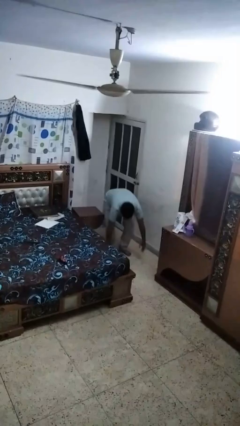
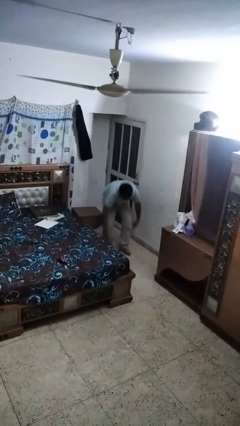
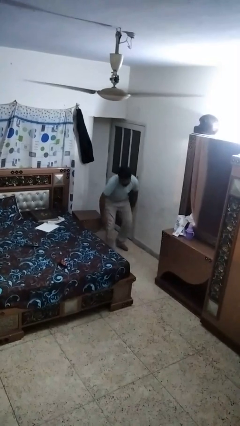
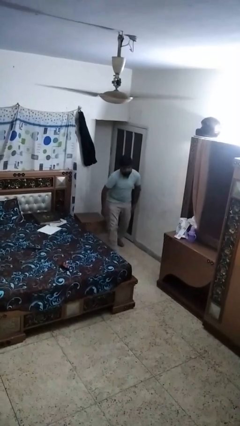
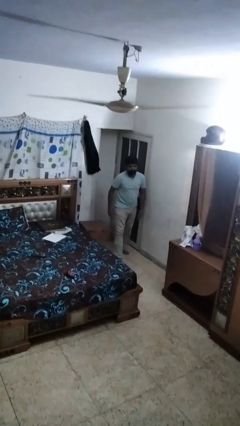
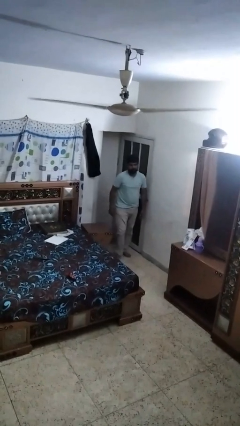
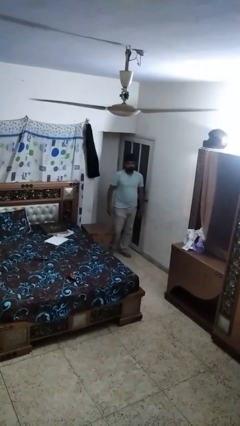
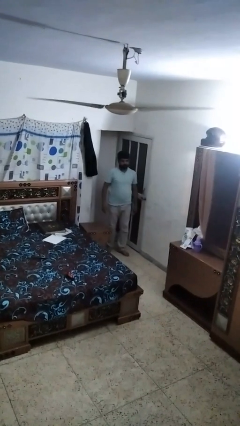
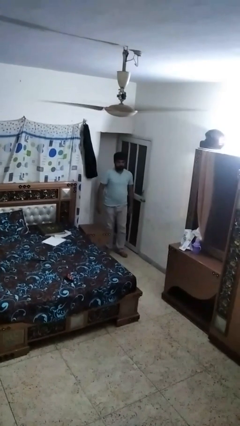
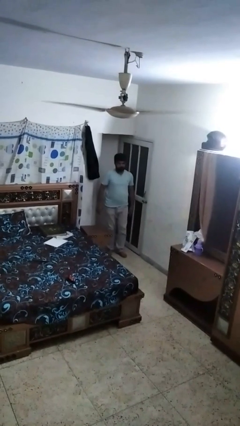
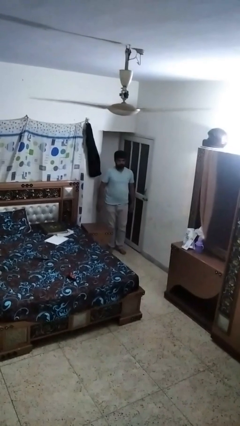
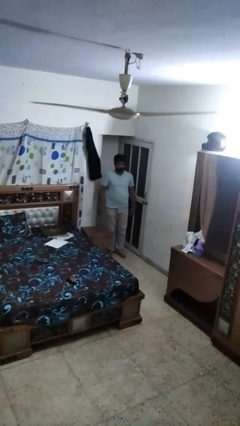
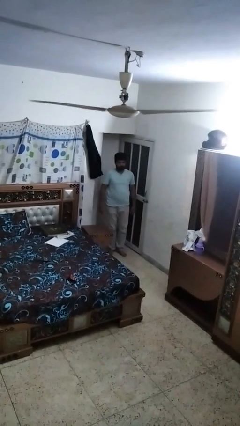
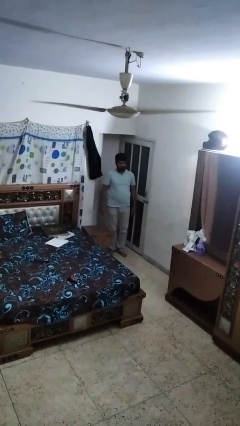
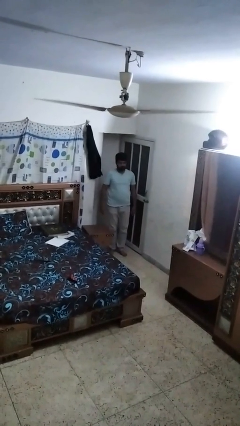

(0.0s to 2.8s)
person stands up from floor

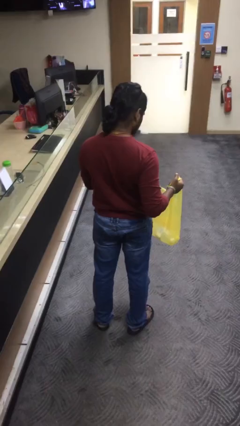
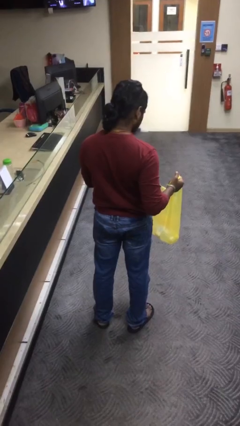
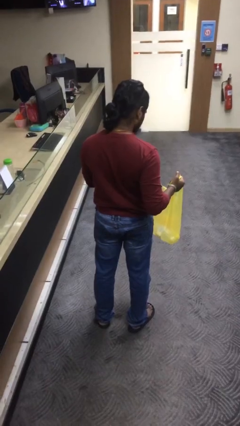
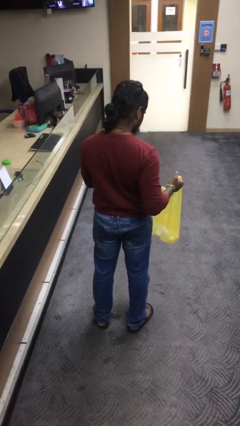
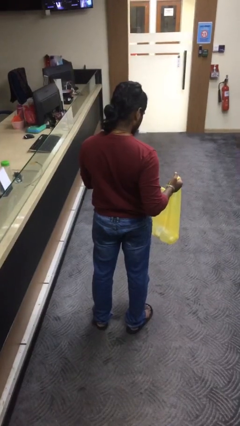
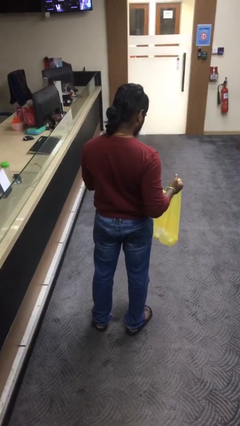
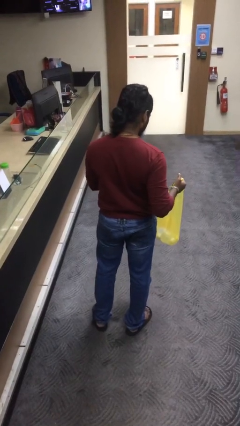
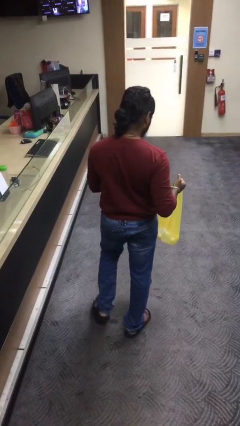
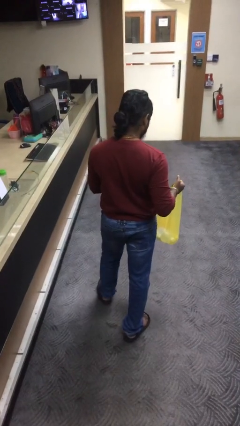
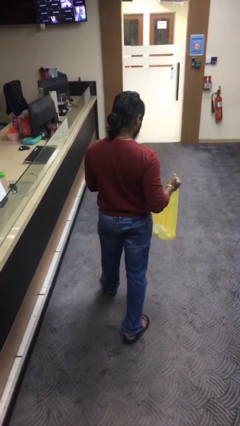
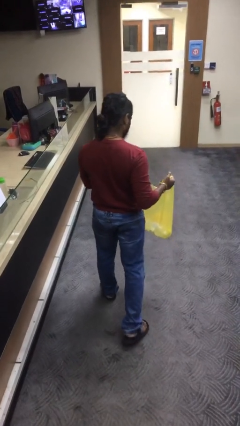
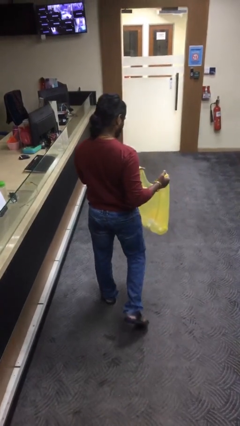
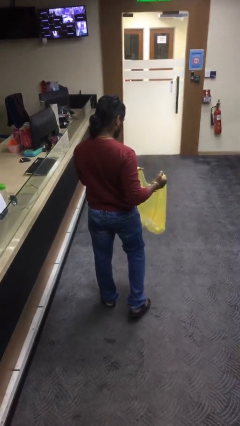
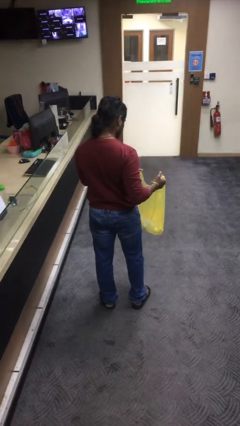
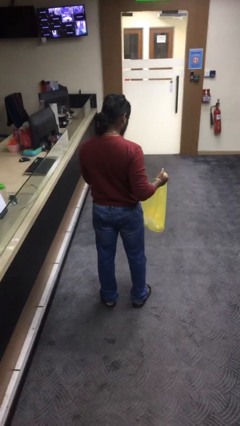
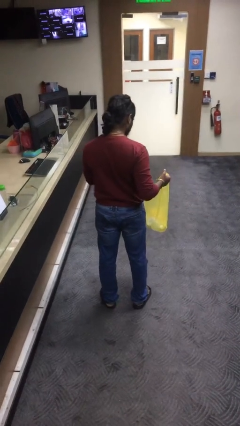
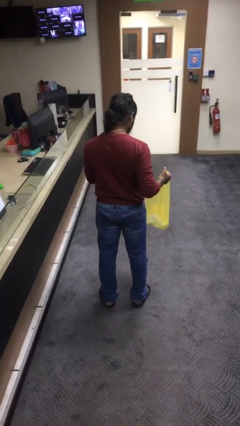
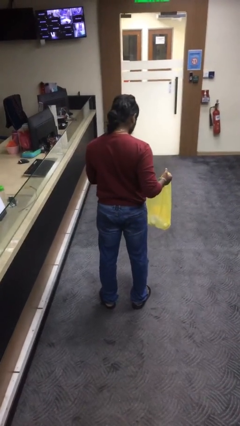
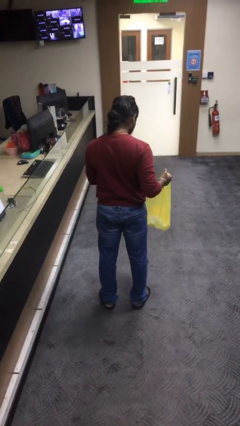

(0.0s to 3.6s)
person carries groceries

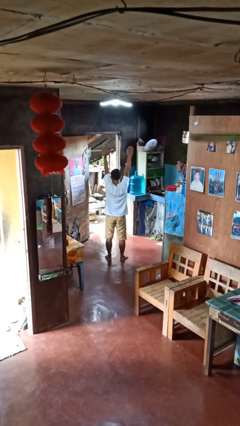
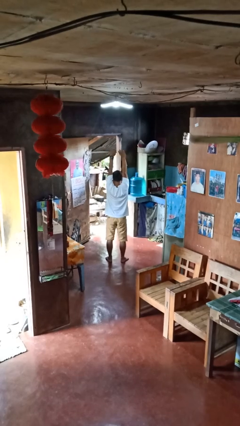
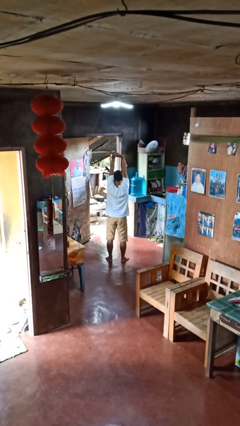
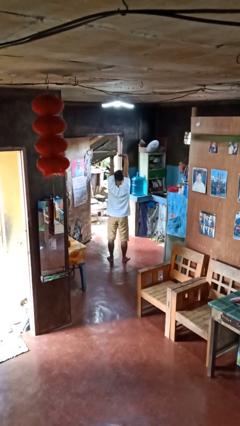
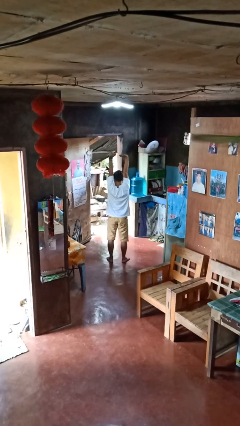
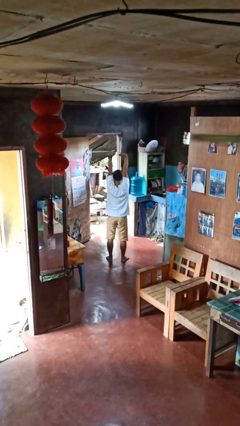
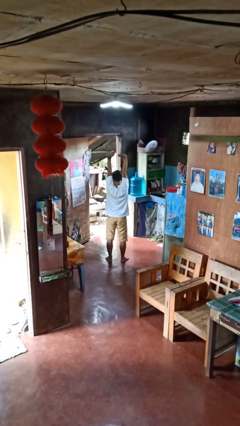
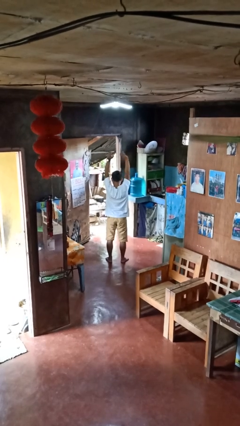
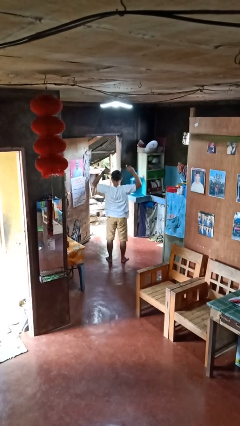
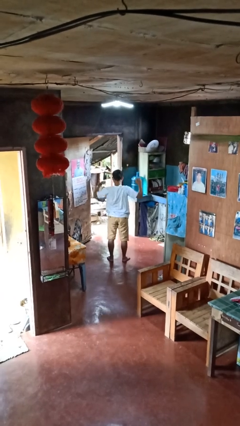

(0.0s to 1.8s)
person stretches arms over head

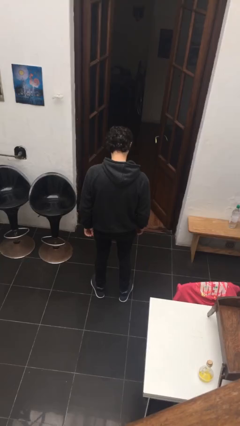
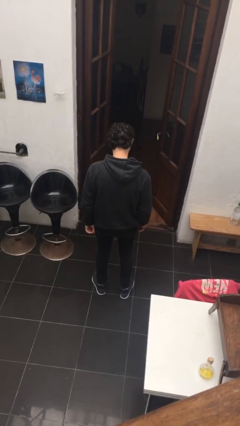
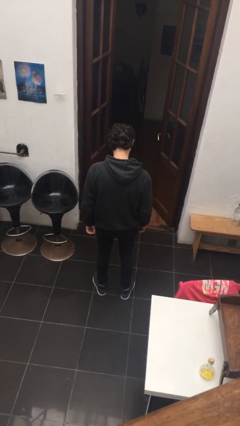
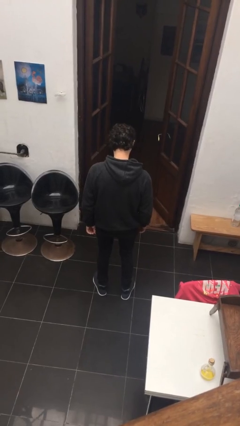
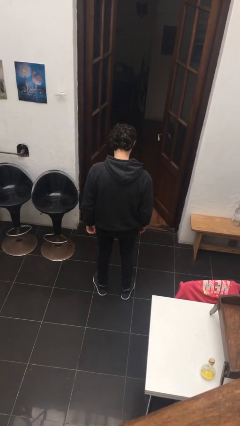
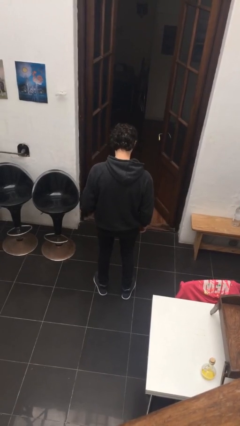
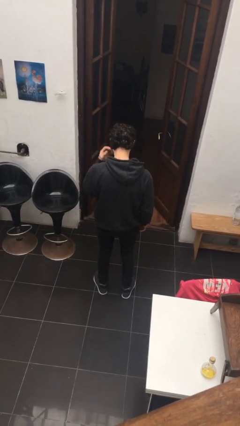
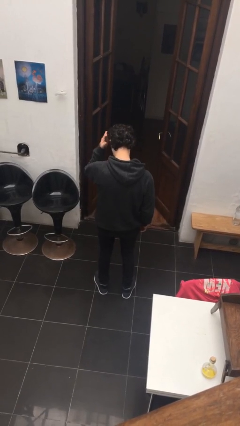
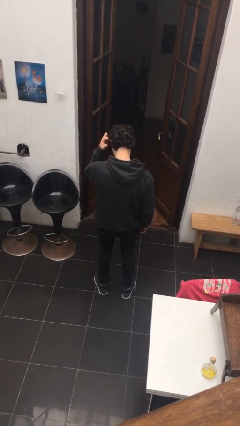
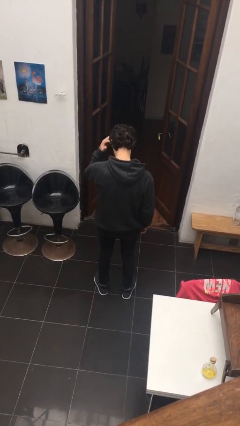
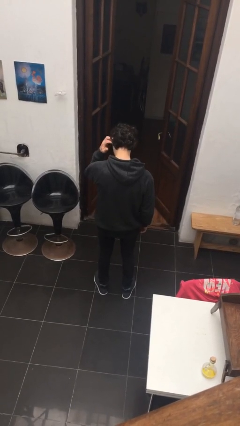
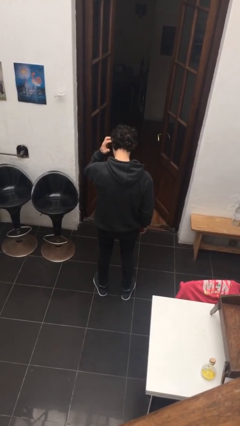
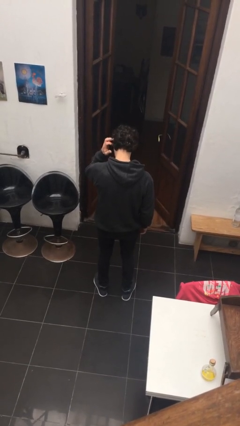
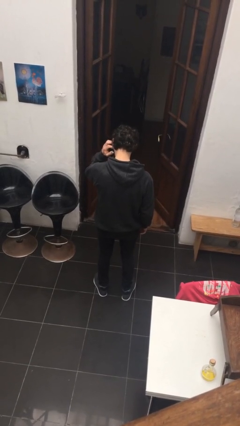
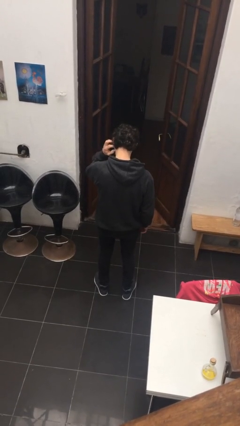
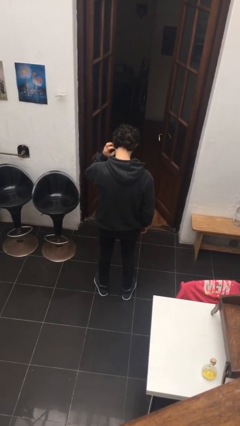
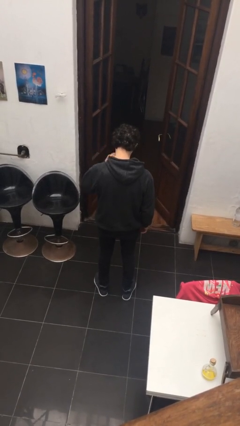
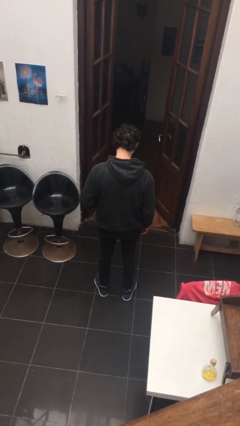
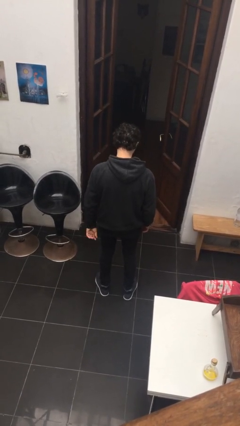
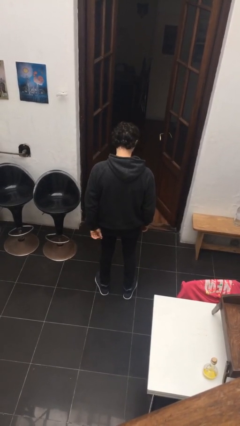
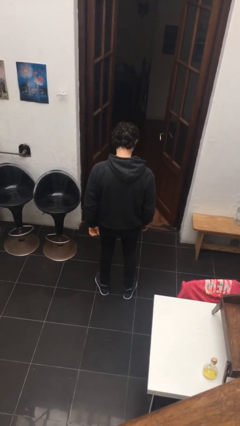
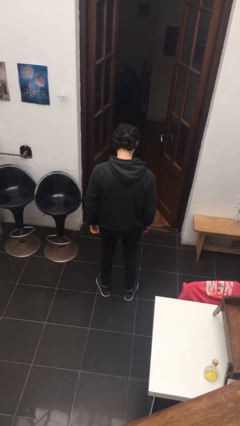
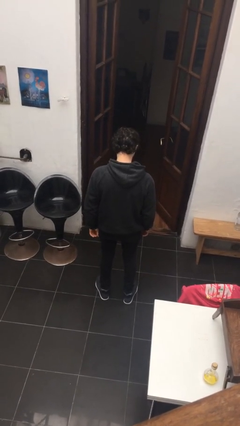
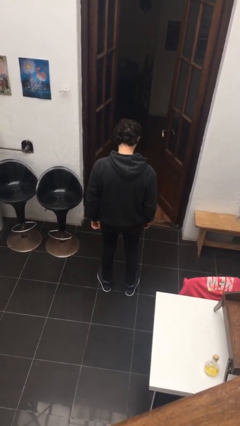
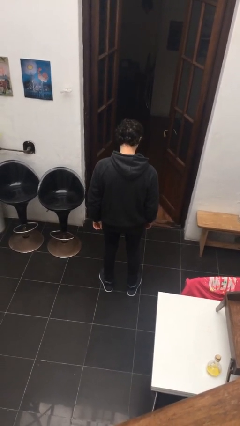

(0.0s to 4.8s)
person scratches face

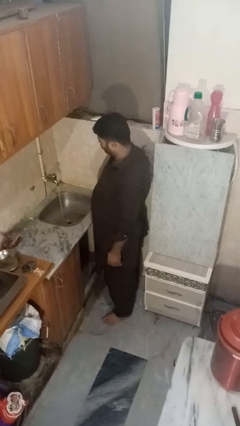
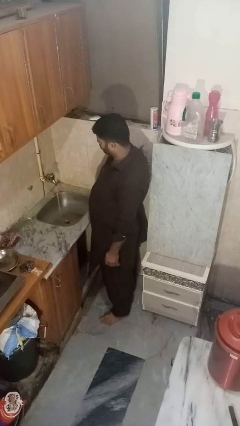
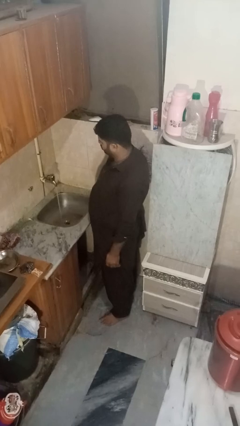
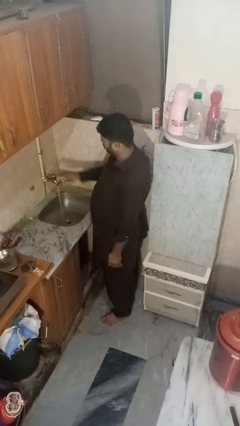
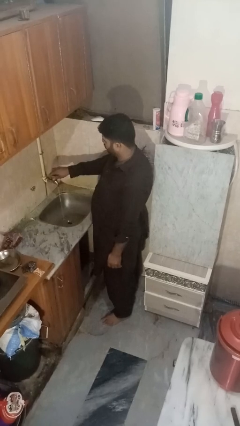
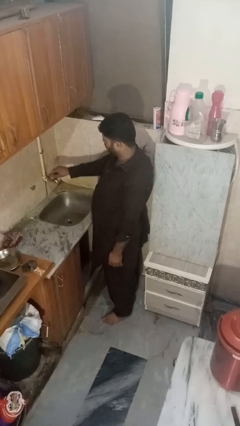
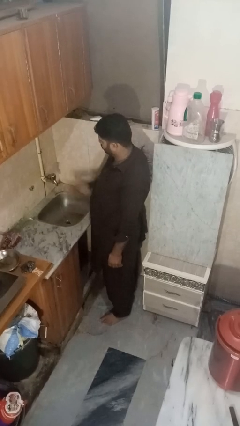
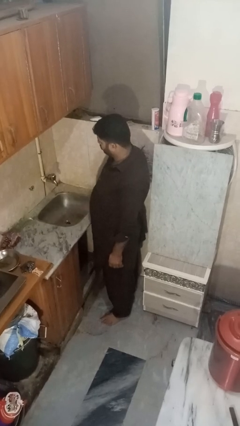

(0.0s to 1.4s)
person turns off faucet

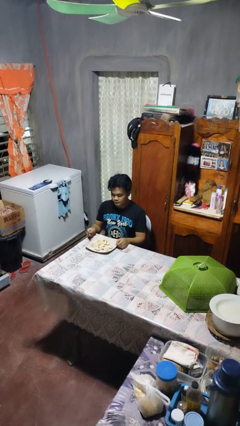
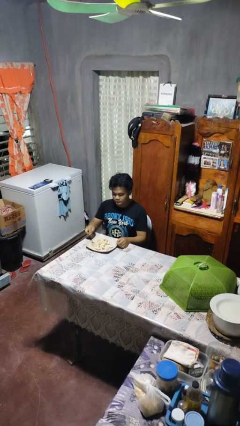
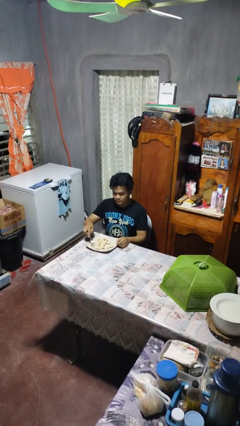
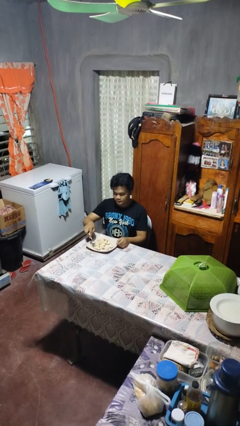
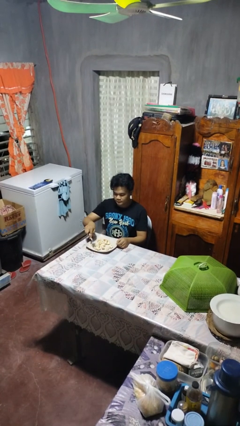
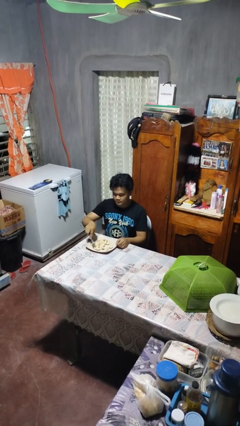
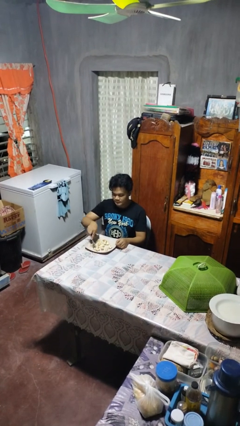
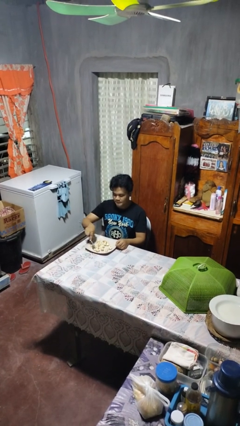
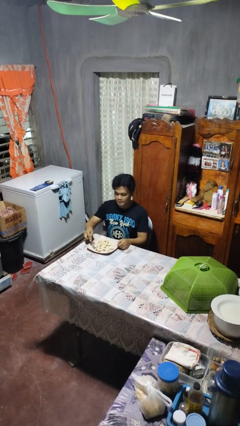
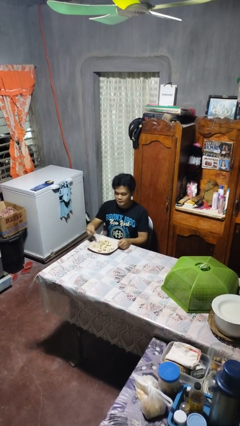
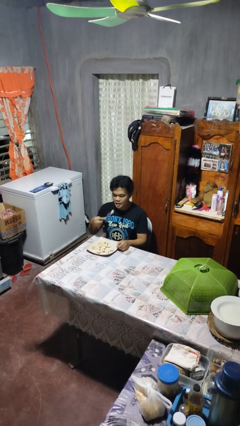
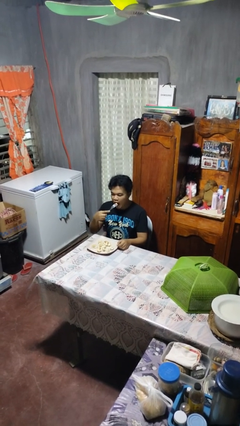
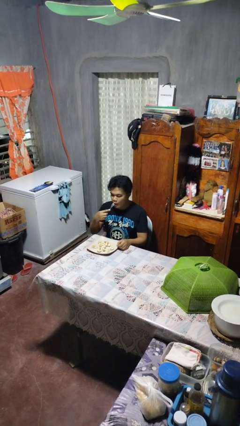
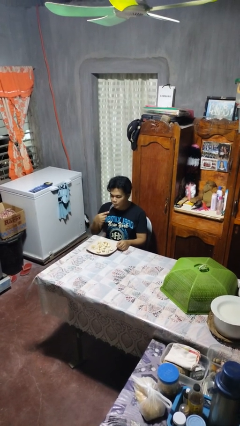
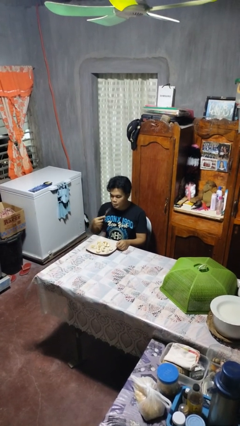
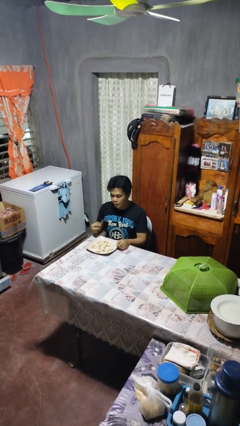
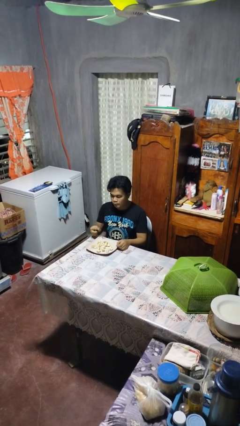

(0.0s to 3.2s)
person eats with utensil
